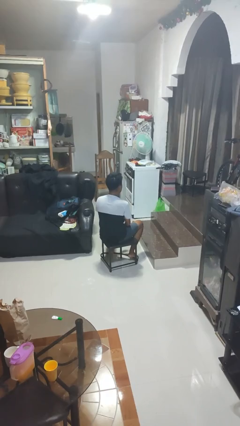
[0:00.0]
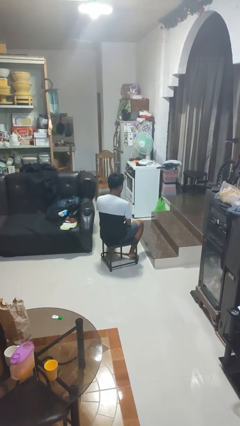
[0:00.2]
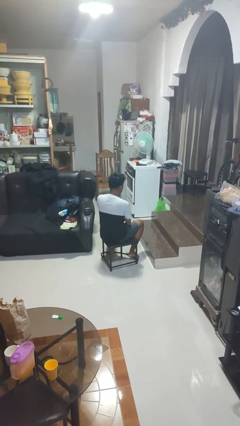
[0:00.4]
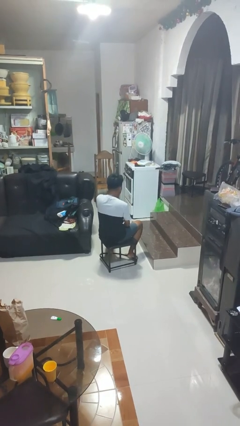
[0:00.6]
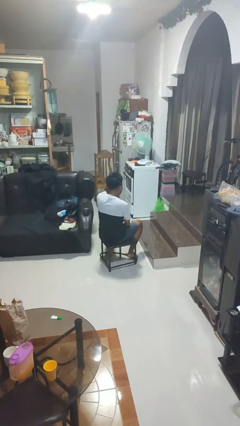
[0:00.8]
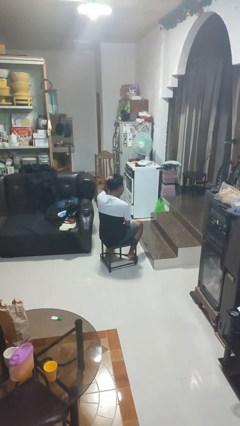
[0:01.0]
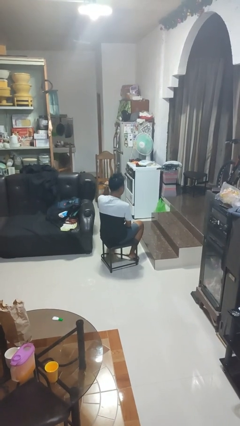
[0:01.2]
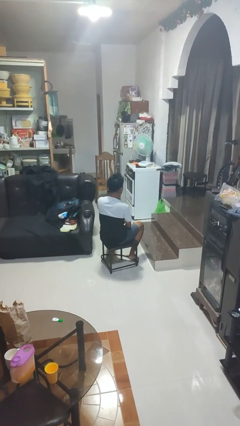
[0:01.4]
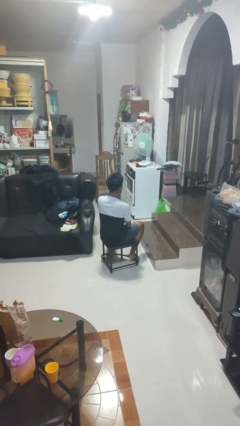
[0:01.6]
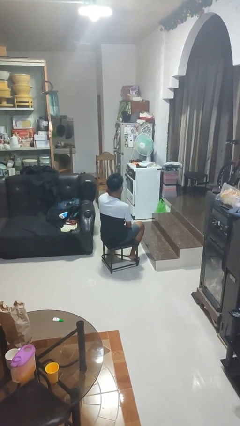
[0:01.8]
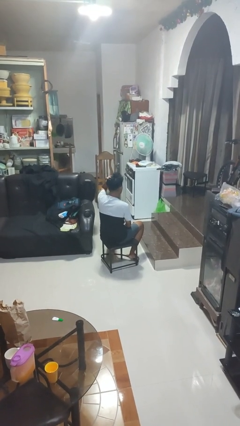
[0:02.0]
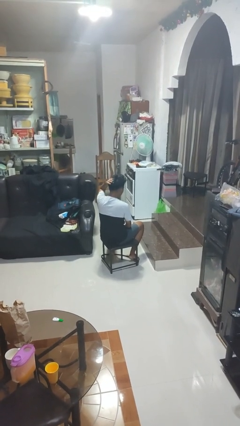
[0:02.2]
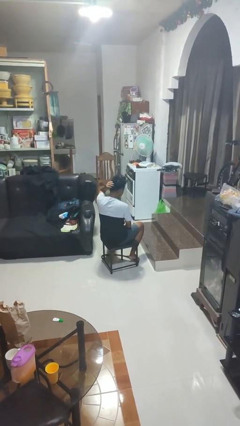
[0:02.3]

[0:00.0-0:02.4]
person strokes hair

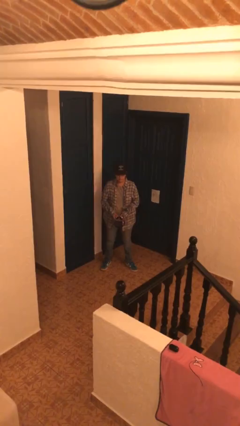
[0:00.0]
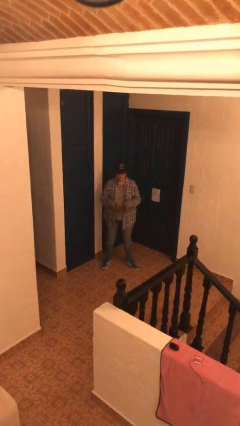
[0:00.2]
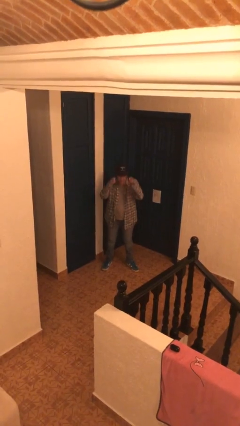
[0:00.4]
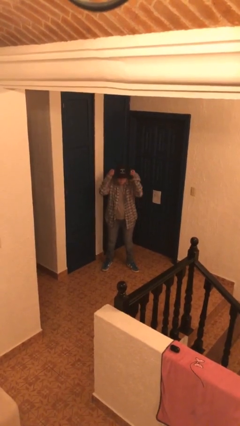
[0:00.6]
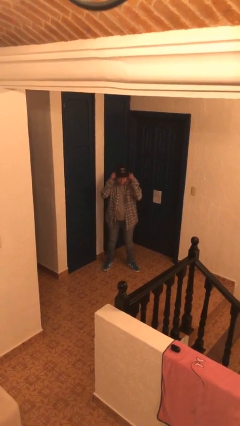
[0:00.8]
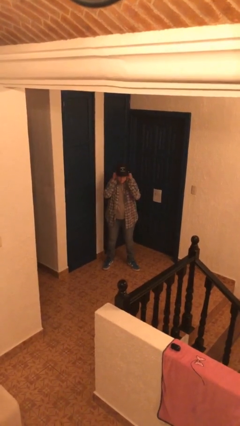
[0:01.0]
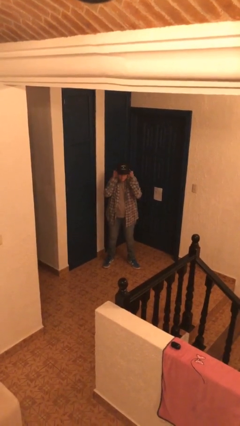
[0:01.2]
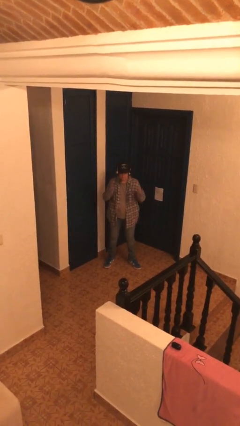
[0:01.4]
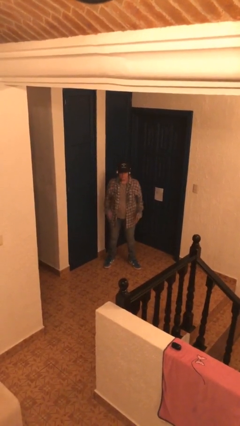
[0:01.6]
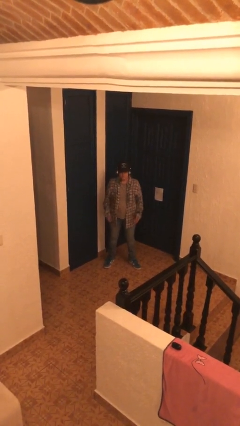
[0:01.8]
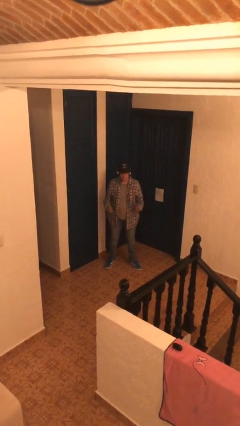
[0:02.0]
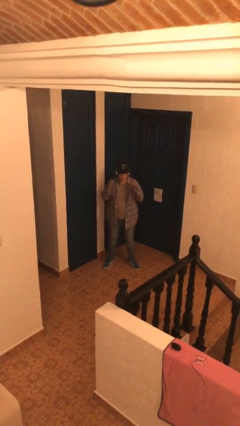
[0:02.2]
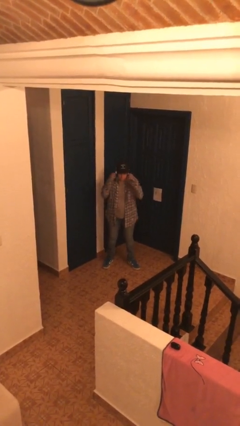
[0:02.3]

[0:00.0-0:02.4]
person puts on headphones

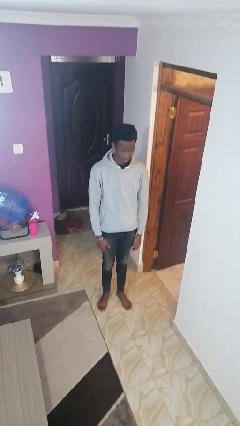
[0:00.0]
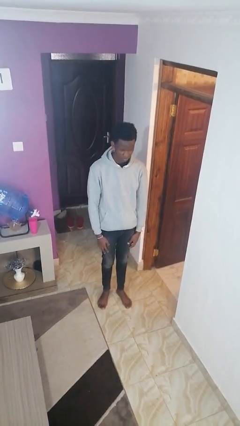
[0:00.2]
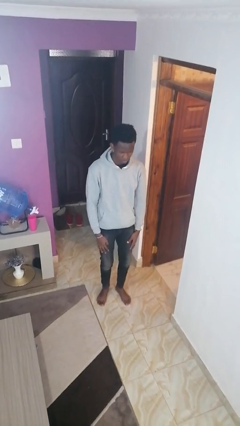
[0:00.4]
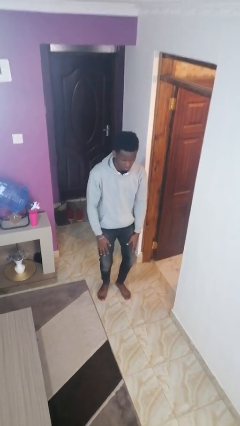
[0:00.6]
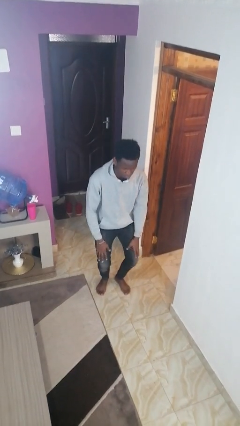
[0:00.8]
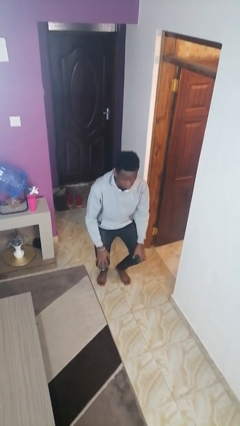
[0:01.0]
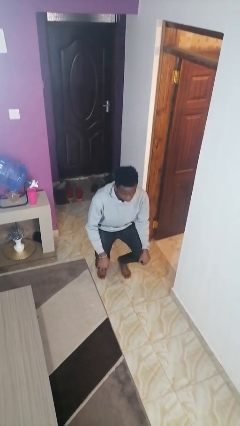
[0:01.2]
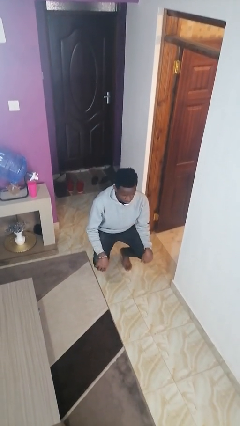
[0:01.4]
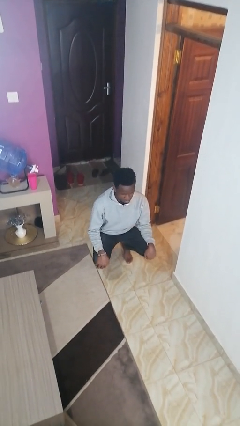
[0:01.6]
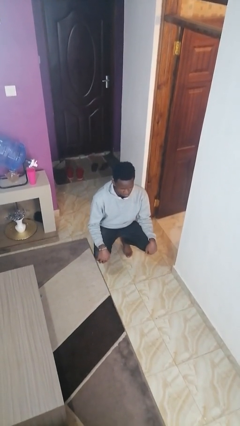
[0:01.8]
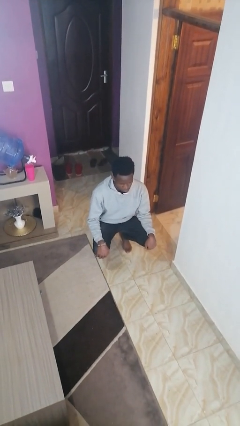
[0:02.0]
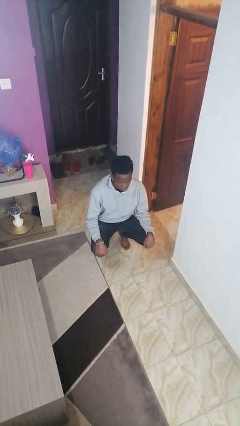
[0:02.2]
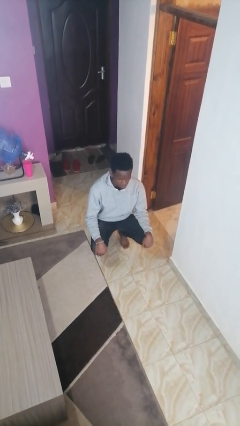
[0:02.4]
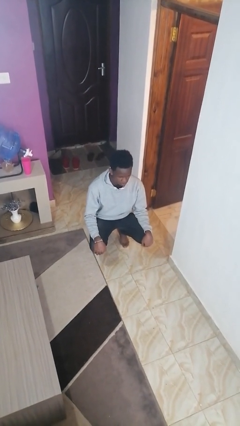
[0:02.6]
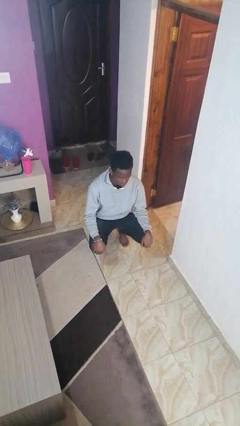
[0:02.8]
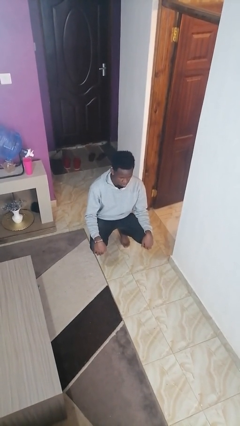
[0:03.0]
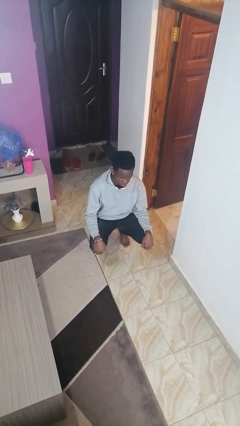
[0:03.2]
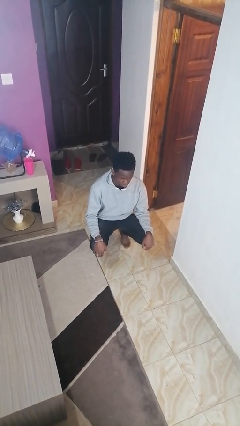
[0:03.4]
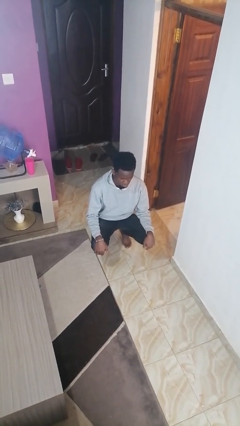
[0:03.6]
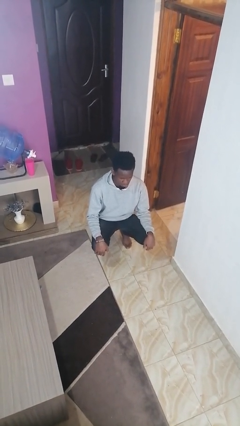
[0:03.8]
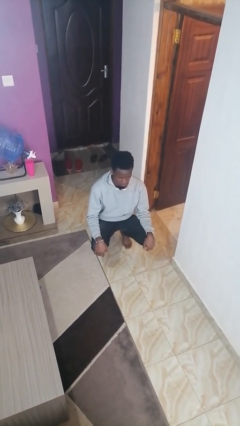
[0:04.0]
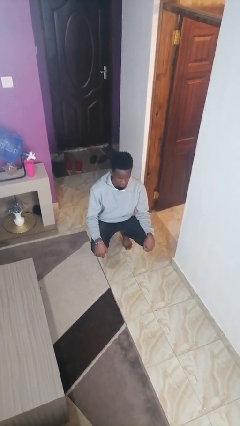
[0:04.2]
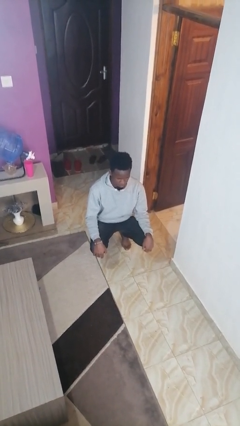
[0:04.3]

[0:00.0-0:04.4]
person squats

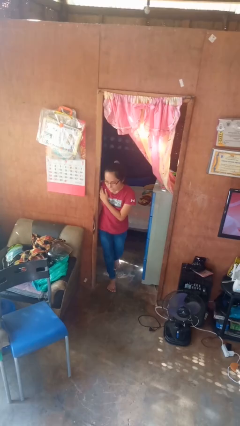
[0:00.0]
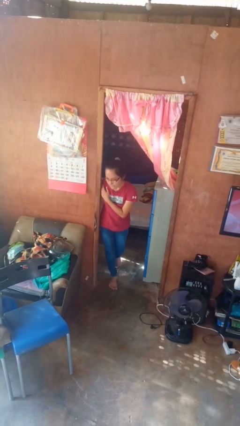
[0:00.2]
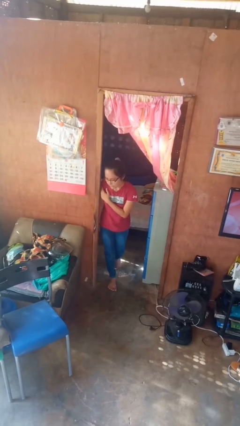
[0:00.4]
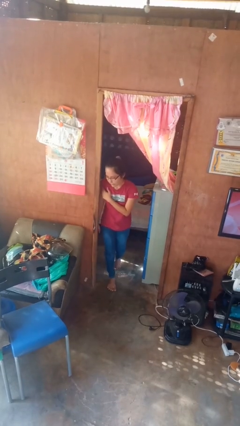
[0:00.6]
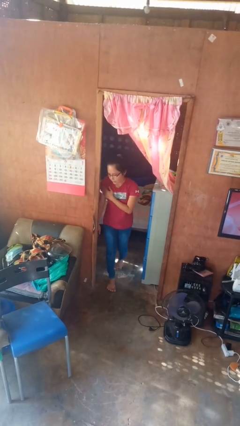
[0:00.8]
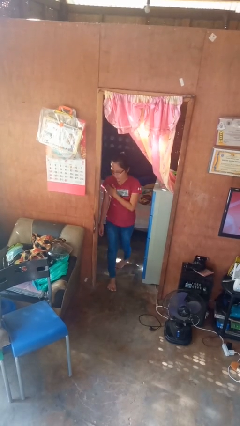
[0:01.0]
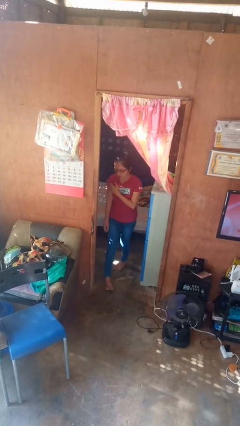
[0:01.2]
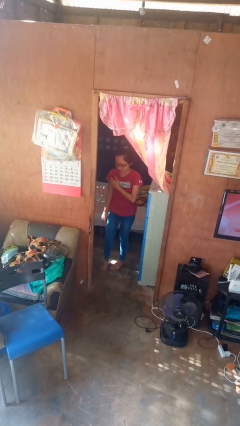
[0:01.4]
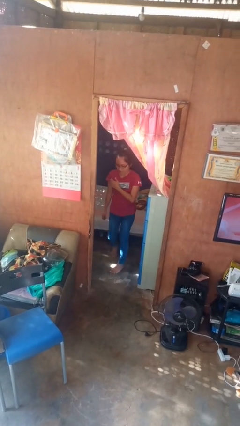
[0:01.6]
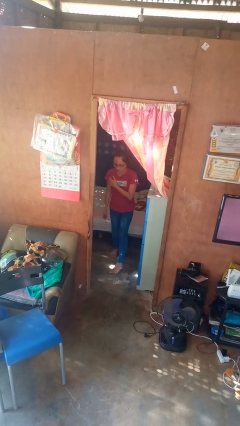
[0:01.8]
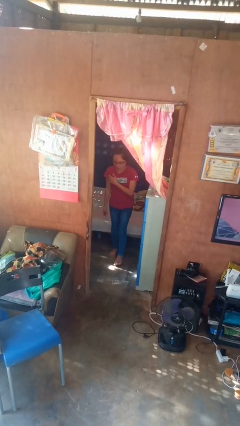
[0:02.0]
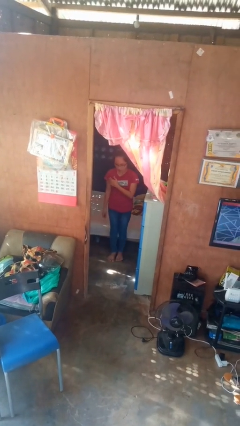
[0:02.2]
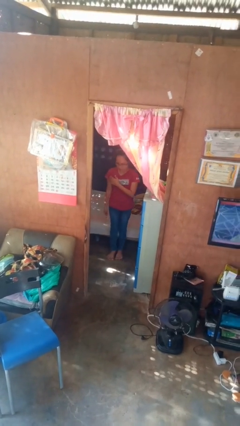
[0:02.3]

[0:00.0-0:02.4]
person bumps into wall

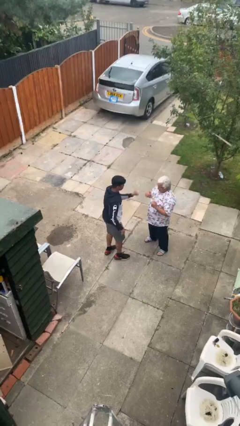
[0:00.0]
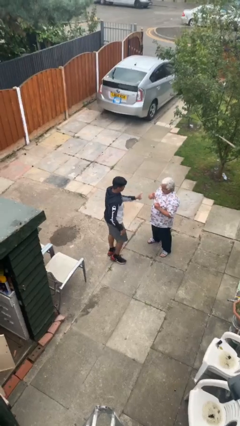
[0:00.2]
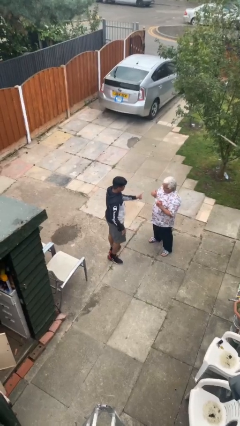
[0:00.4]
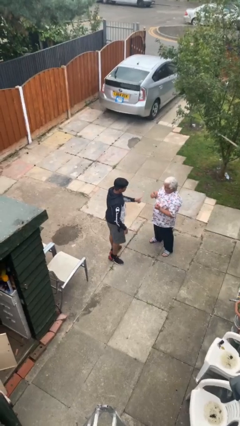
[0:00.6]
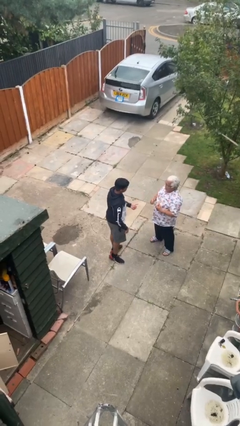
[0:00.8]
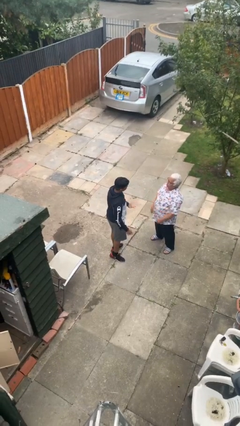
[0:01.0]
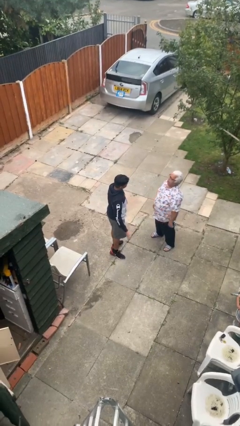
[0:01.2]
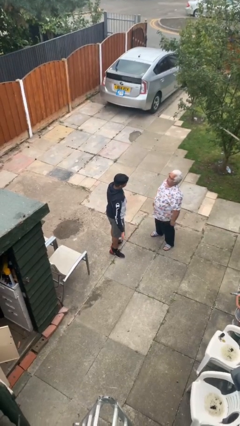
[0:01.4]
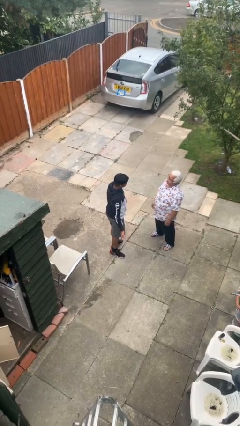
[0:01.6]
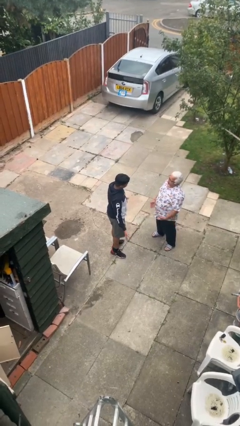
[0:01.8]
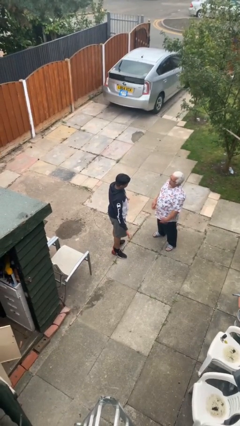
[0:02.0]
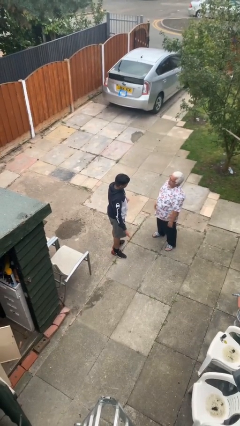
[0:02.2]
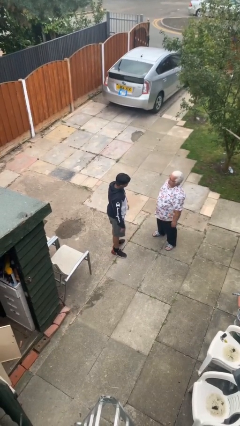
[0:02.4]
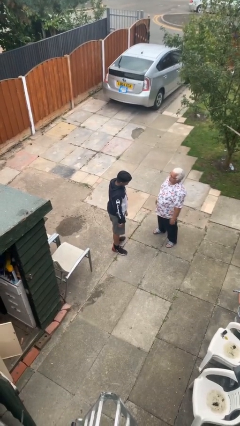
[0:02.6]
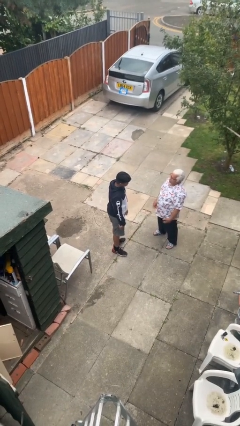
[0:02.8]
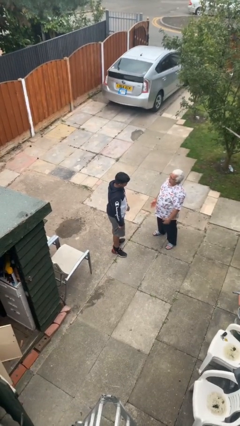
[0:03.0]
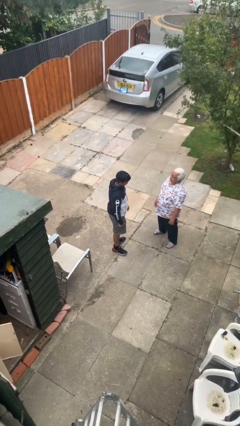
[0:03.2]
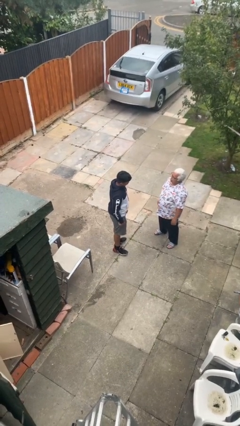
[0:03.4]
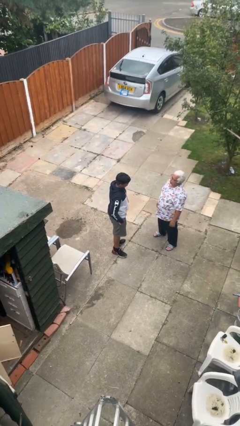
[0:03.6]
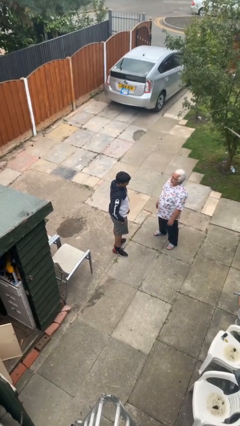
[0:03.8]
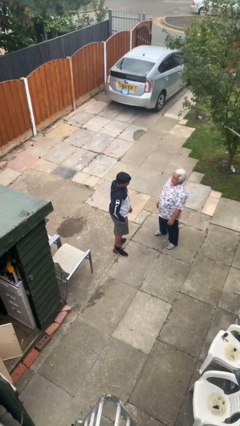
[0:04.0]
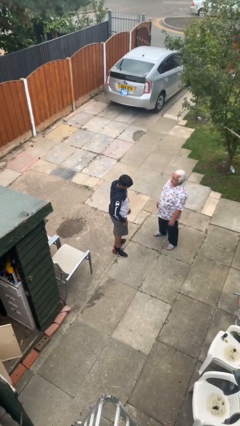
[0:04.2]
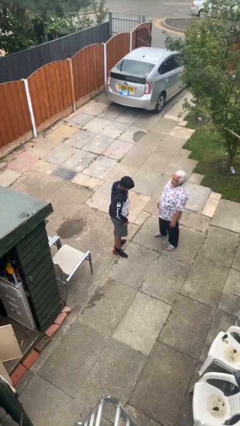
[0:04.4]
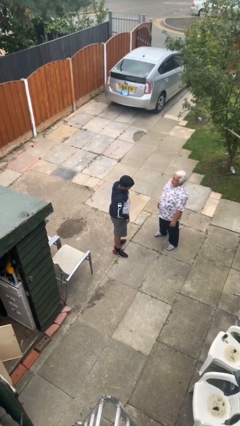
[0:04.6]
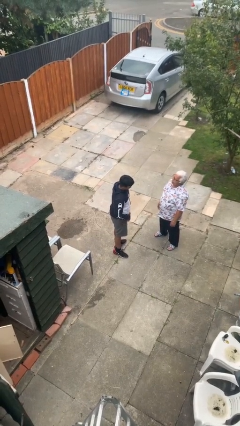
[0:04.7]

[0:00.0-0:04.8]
person talks to person

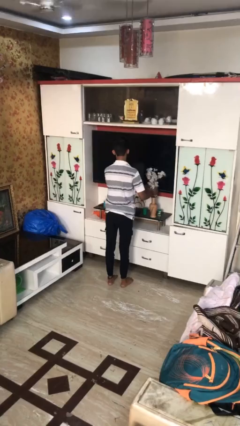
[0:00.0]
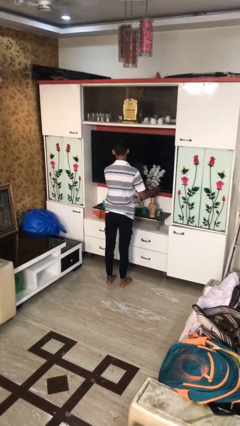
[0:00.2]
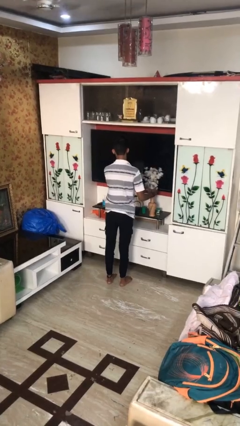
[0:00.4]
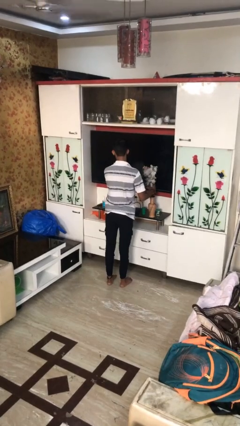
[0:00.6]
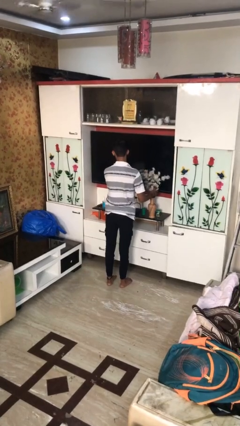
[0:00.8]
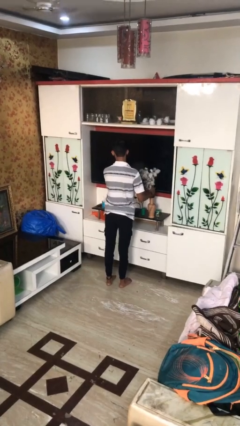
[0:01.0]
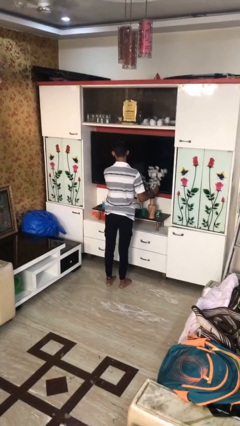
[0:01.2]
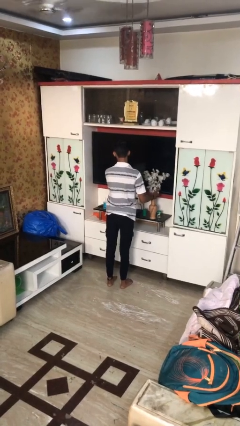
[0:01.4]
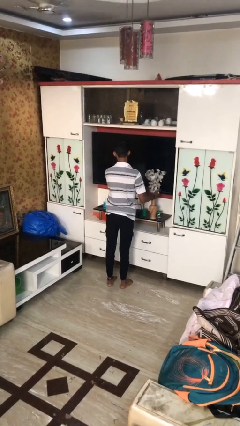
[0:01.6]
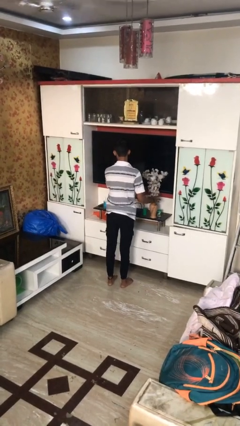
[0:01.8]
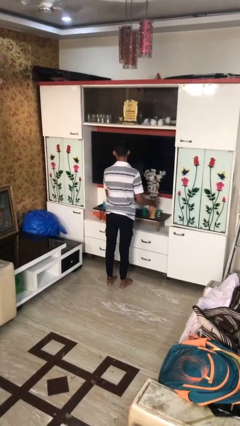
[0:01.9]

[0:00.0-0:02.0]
person arranges flowers in vase
